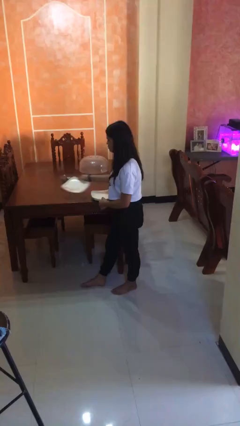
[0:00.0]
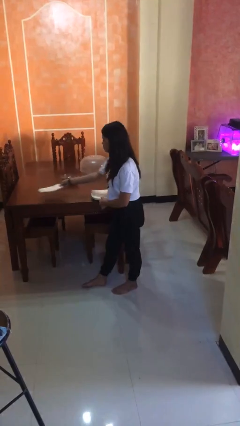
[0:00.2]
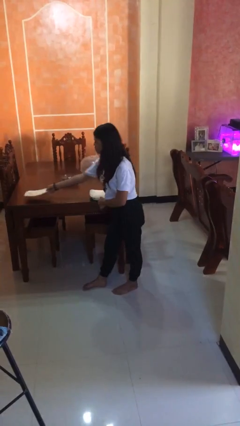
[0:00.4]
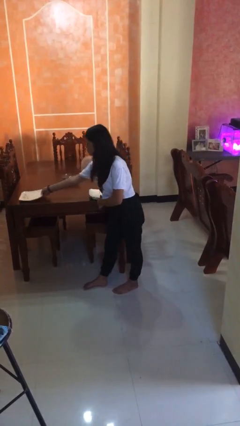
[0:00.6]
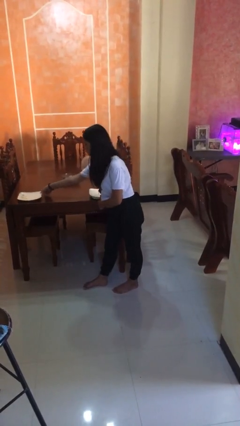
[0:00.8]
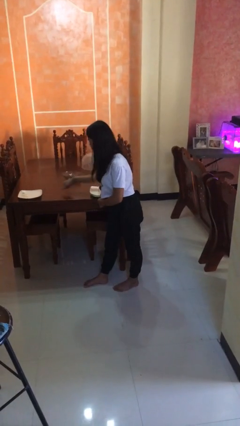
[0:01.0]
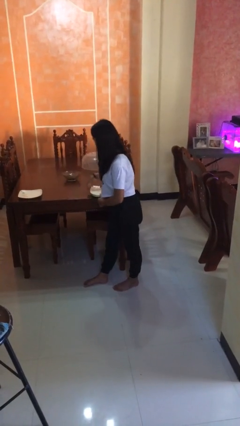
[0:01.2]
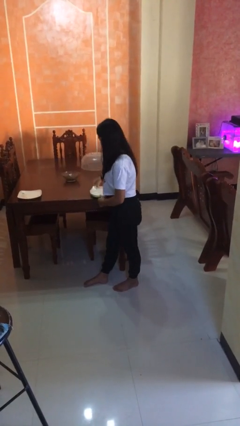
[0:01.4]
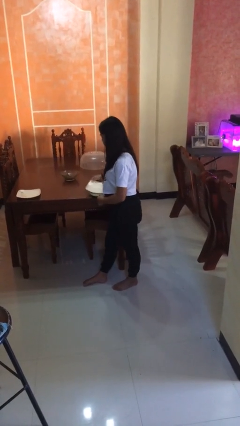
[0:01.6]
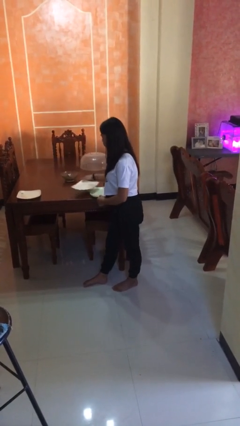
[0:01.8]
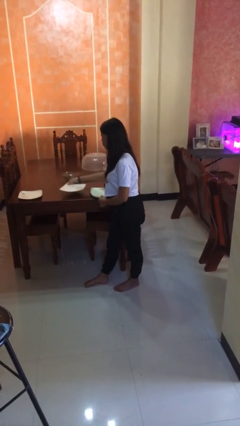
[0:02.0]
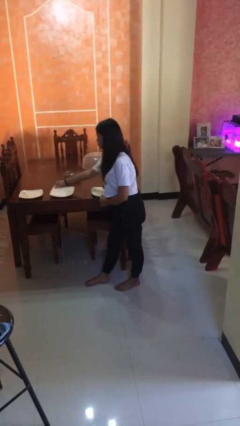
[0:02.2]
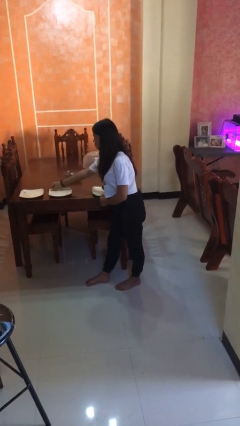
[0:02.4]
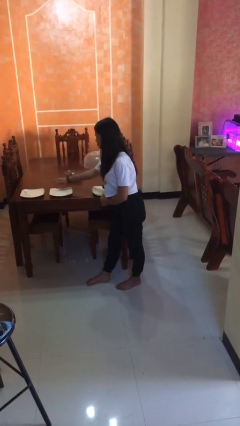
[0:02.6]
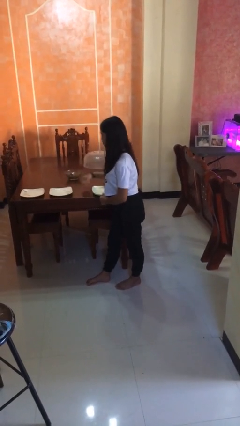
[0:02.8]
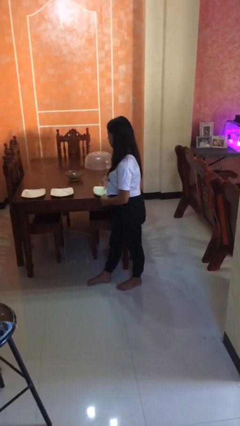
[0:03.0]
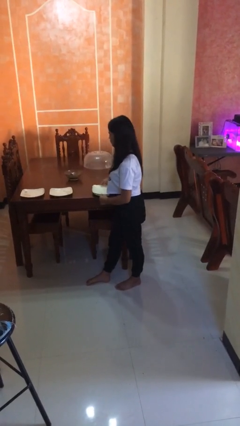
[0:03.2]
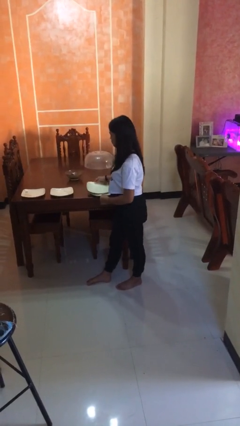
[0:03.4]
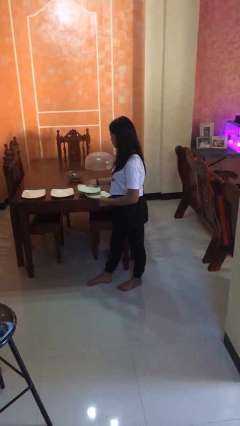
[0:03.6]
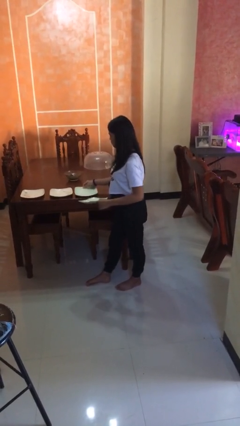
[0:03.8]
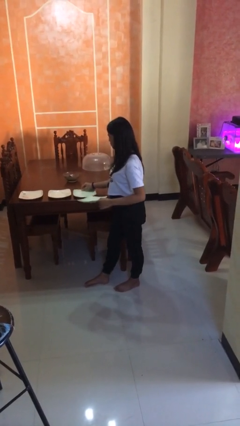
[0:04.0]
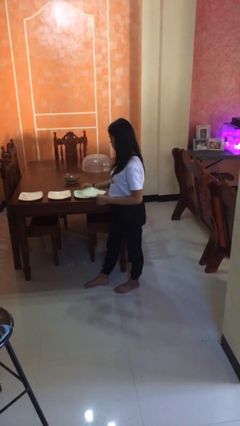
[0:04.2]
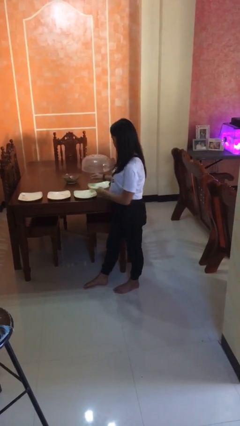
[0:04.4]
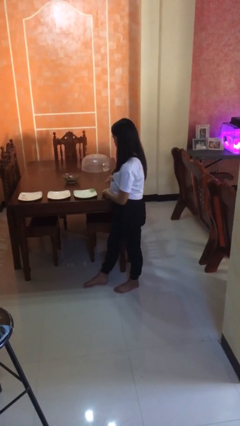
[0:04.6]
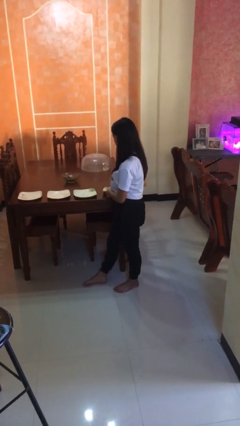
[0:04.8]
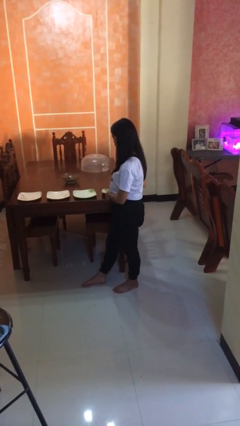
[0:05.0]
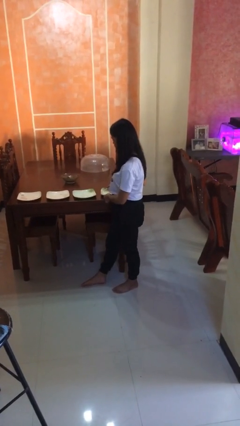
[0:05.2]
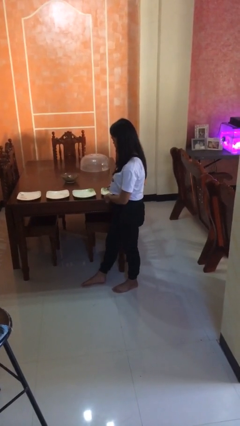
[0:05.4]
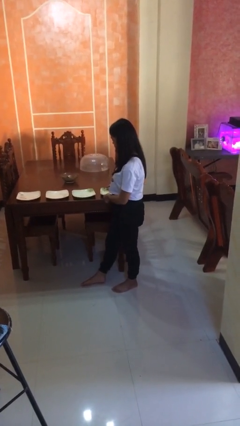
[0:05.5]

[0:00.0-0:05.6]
person sets table

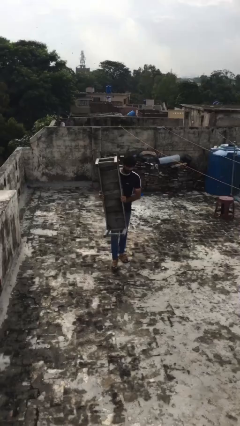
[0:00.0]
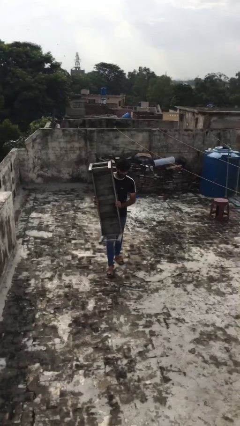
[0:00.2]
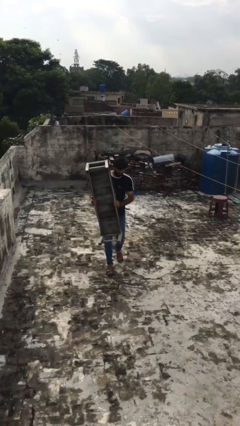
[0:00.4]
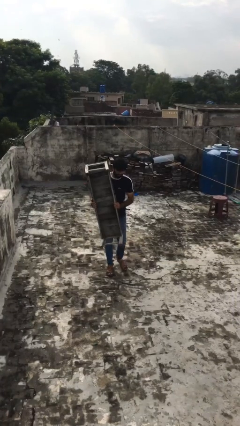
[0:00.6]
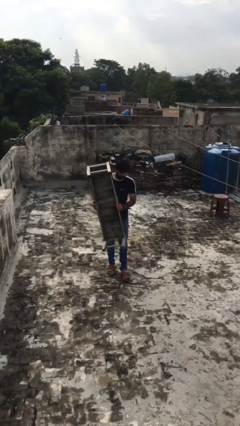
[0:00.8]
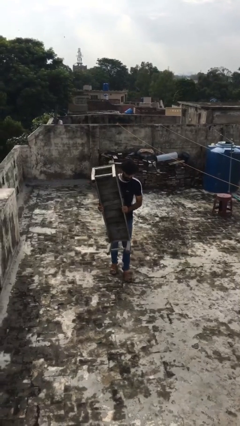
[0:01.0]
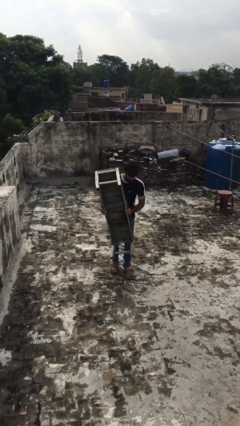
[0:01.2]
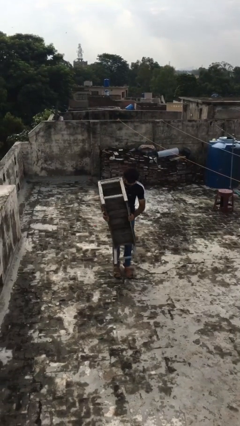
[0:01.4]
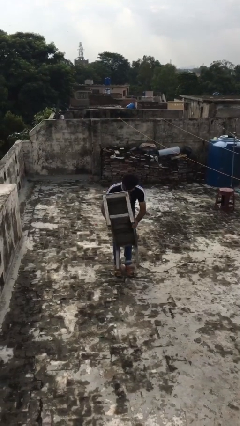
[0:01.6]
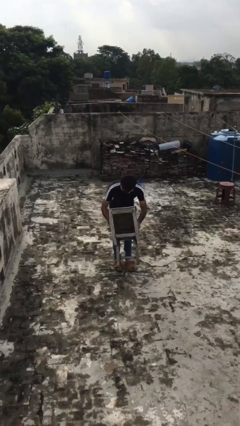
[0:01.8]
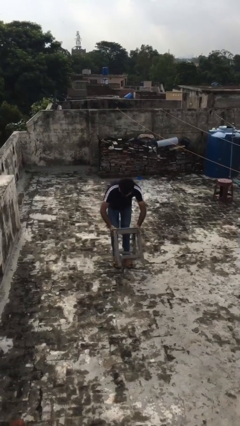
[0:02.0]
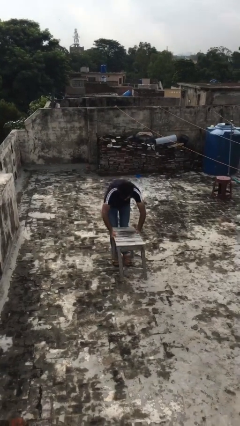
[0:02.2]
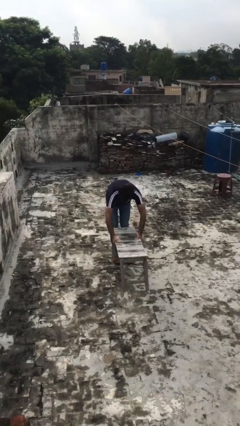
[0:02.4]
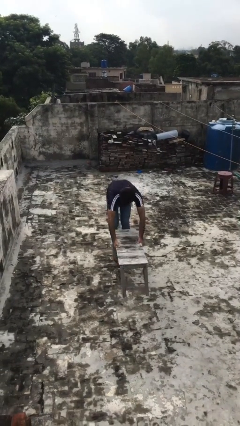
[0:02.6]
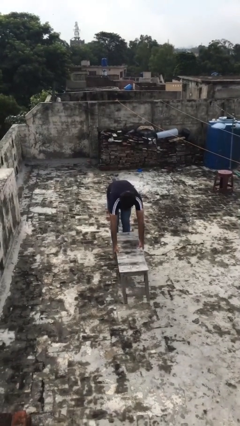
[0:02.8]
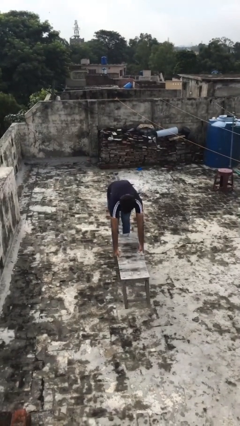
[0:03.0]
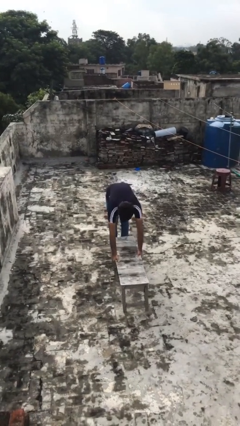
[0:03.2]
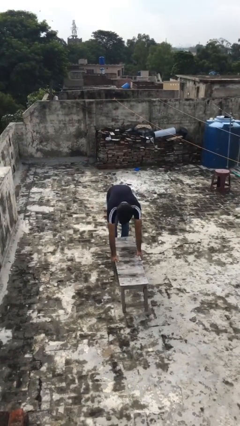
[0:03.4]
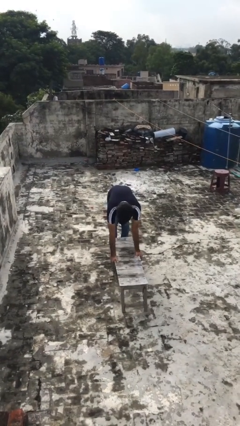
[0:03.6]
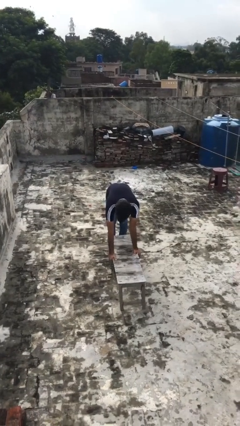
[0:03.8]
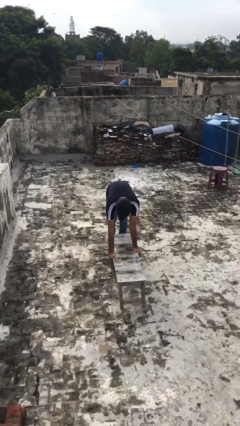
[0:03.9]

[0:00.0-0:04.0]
person puts down object on floor

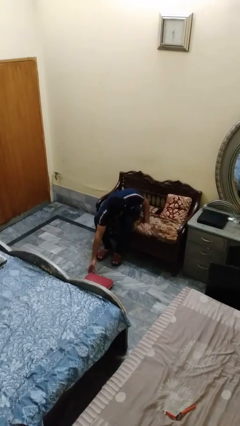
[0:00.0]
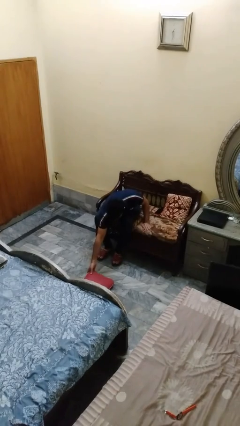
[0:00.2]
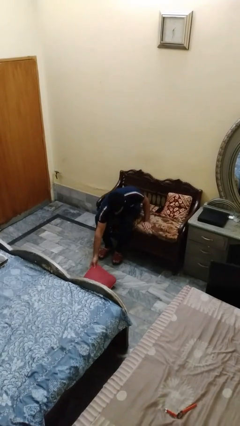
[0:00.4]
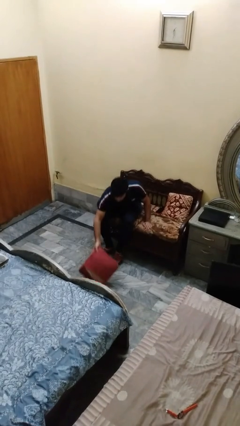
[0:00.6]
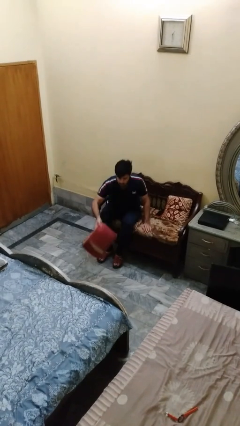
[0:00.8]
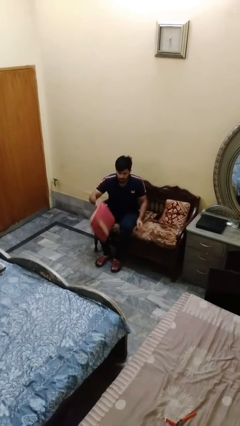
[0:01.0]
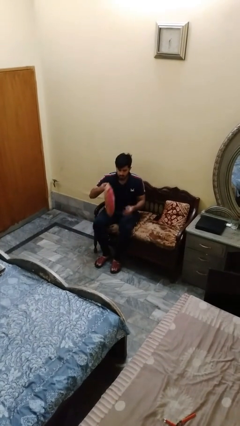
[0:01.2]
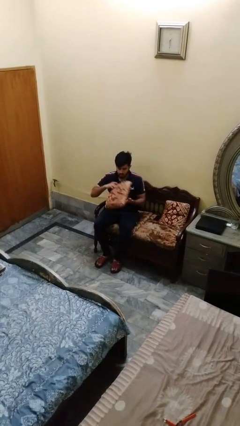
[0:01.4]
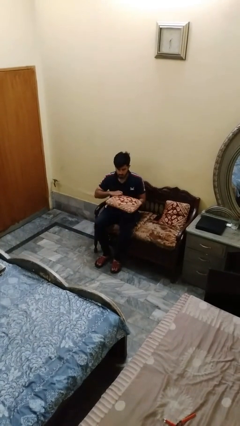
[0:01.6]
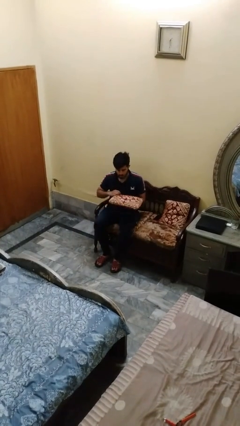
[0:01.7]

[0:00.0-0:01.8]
person picks up object from floor

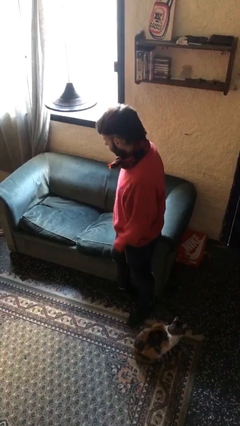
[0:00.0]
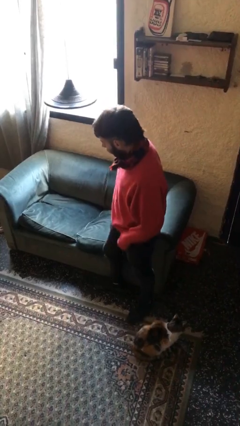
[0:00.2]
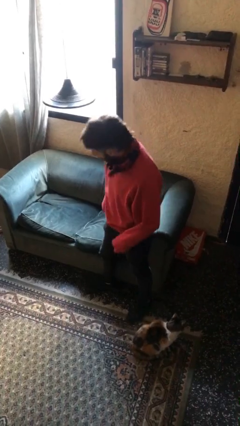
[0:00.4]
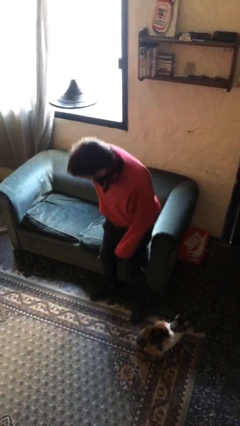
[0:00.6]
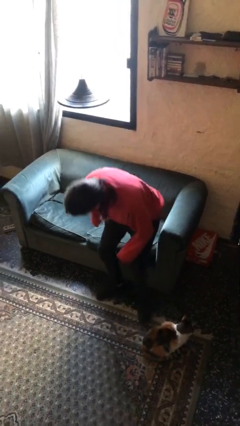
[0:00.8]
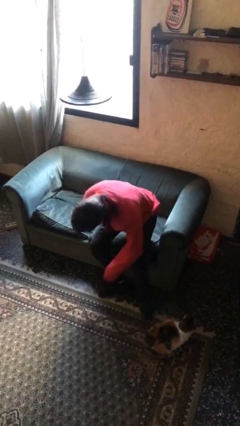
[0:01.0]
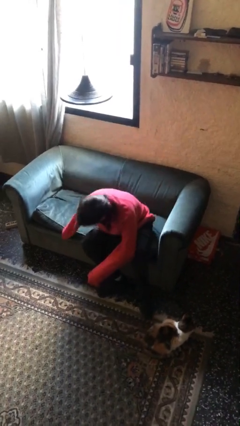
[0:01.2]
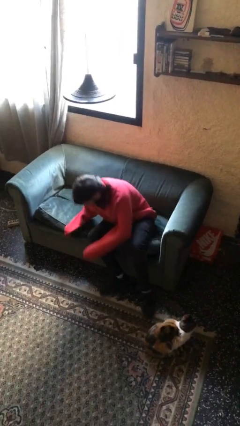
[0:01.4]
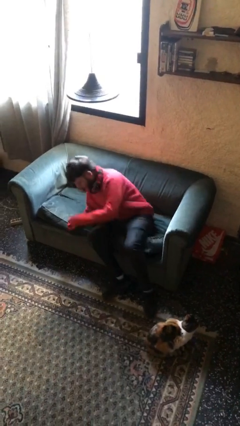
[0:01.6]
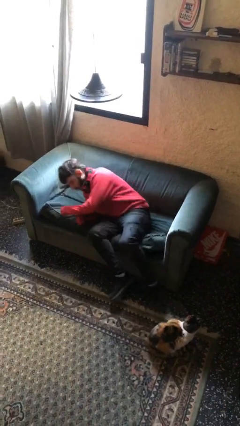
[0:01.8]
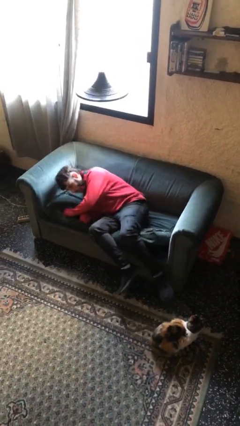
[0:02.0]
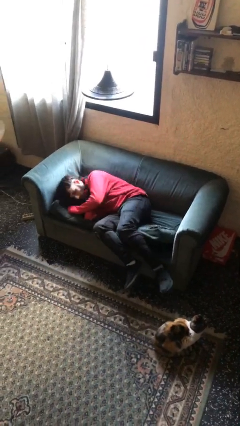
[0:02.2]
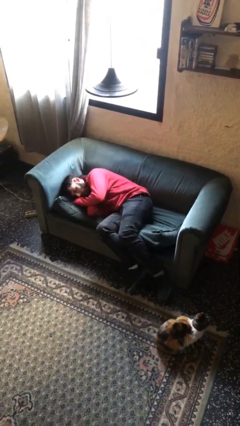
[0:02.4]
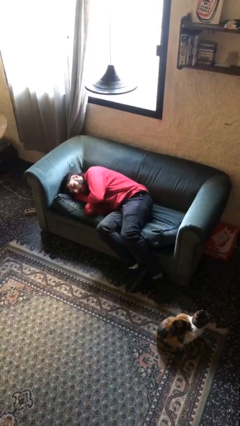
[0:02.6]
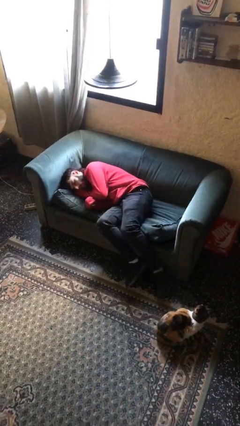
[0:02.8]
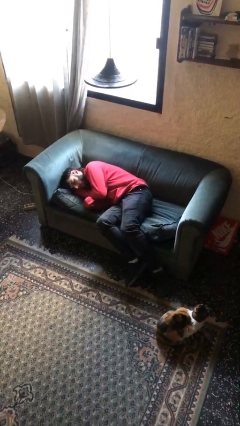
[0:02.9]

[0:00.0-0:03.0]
person lies down on couch

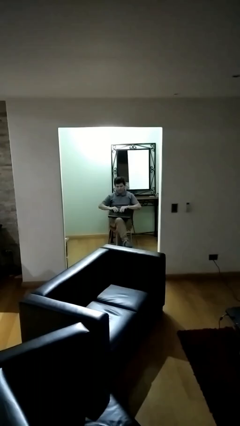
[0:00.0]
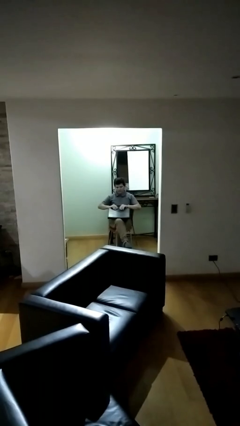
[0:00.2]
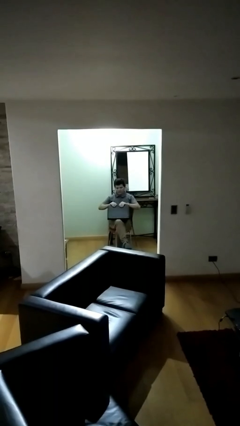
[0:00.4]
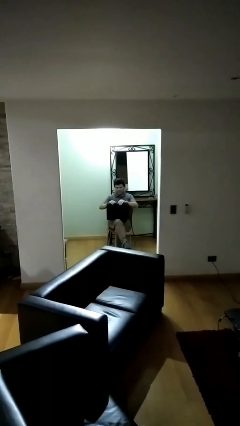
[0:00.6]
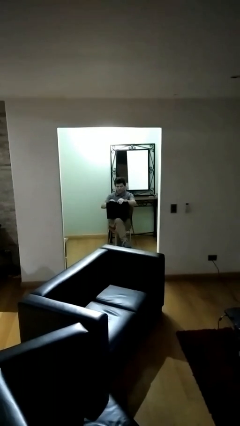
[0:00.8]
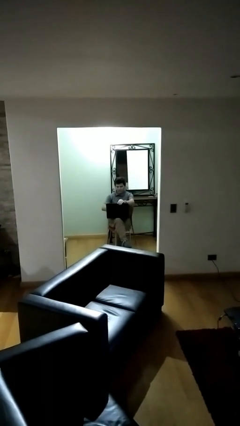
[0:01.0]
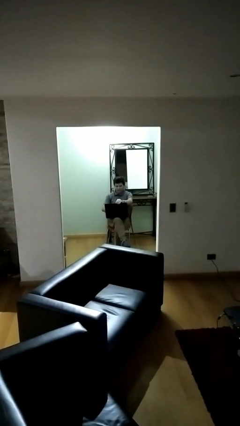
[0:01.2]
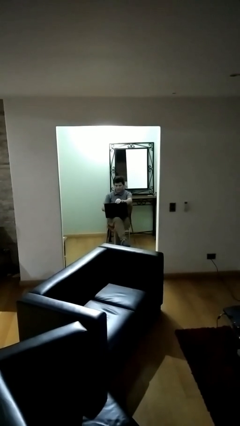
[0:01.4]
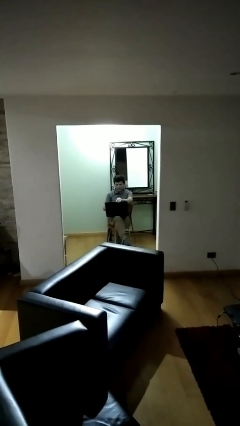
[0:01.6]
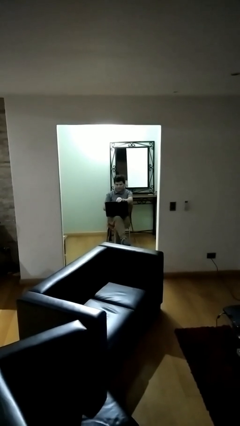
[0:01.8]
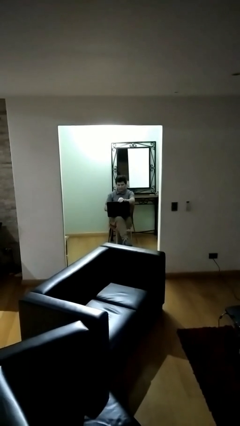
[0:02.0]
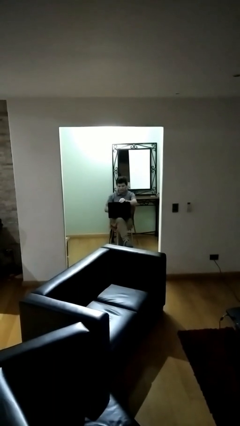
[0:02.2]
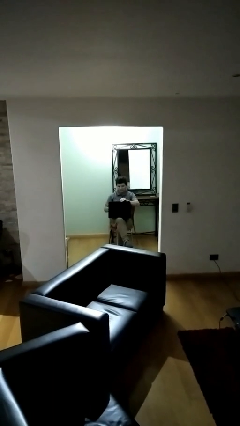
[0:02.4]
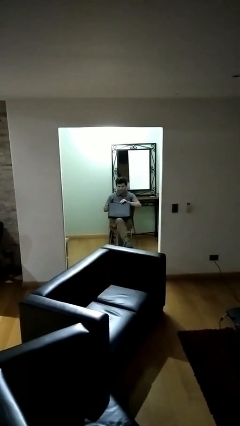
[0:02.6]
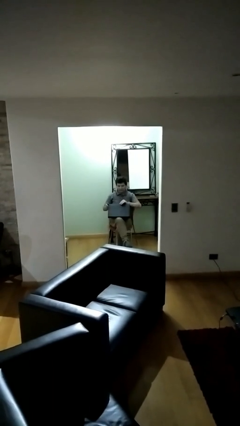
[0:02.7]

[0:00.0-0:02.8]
person interacts with laptop

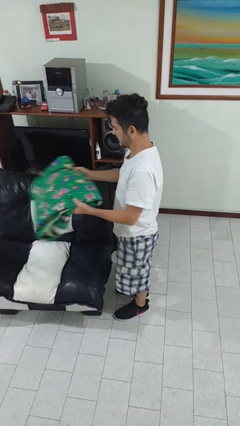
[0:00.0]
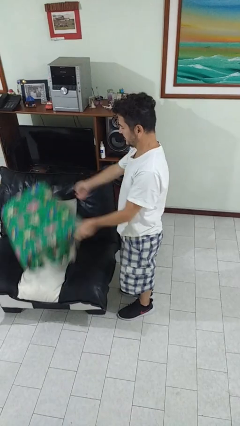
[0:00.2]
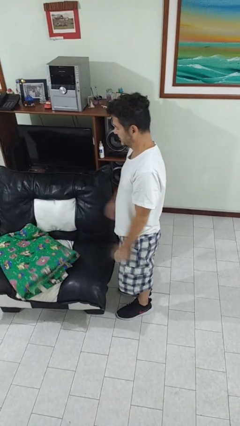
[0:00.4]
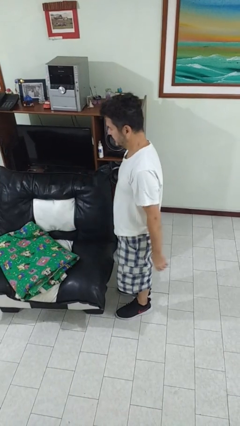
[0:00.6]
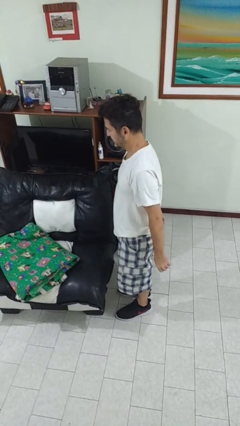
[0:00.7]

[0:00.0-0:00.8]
person puts down object on couch
